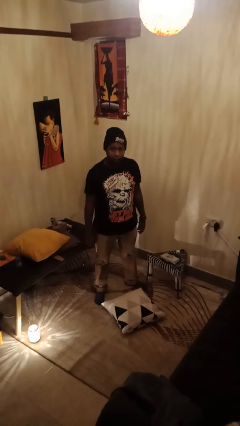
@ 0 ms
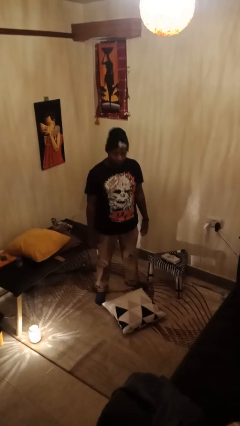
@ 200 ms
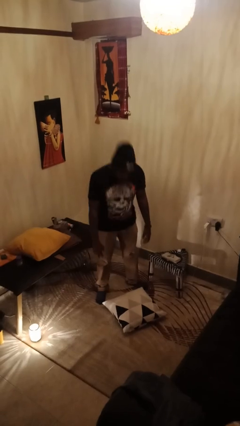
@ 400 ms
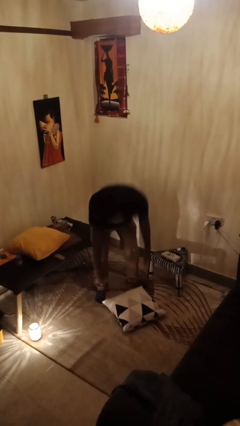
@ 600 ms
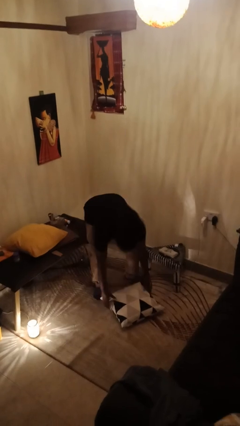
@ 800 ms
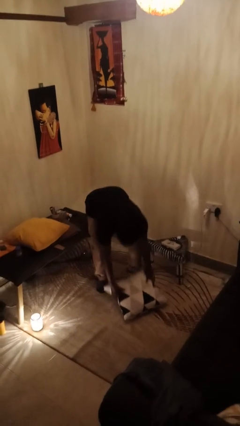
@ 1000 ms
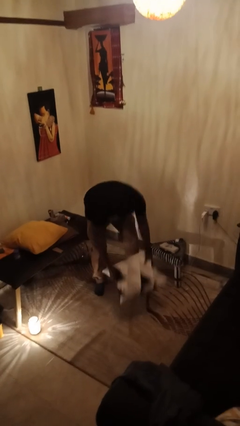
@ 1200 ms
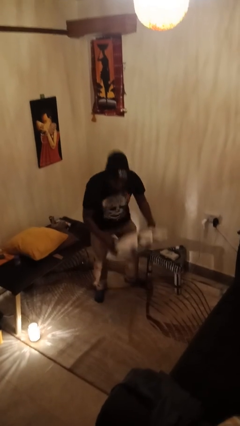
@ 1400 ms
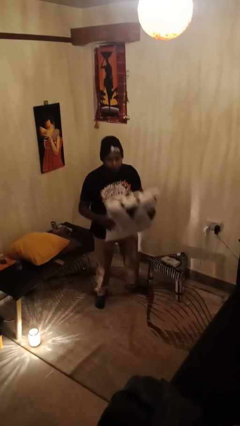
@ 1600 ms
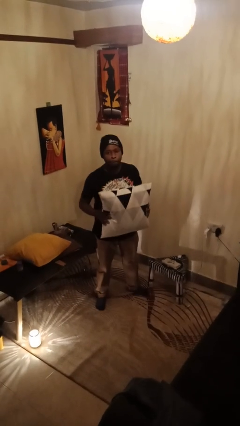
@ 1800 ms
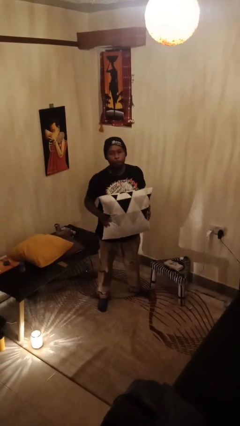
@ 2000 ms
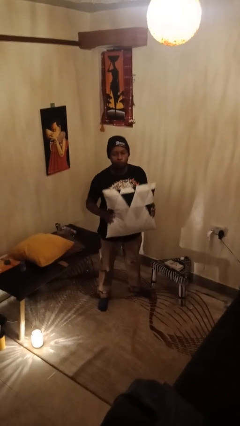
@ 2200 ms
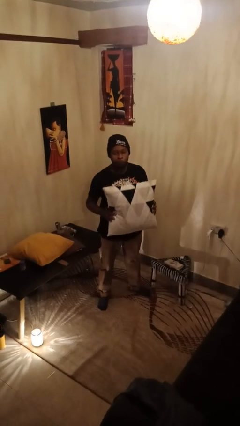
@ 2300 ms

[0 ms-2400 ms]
person picks up object from floor

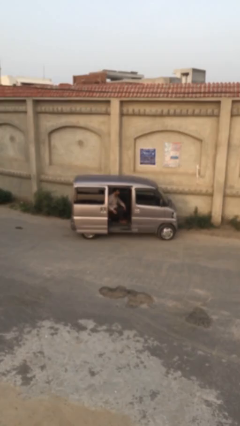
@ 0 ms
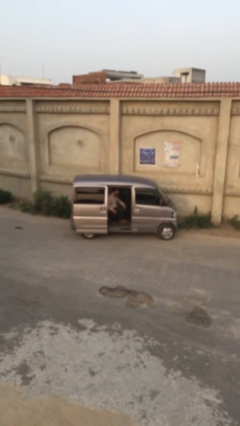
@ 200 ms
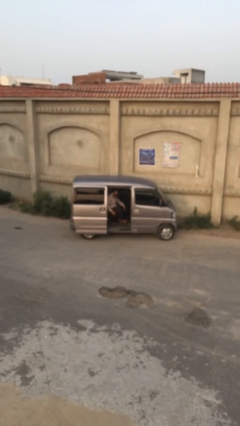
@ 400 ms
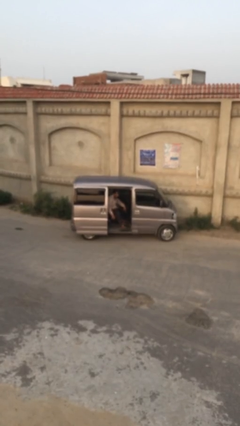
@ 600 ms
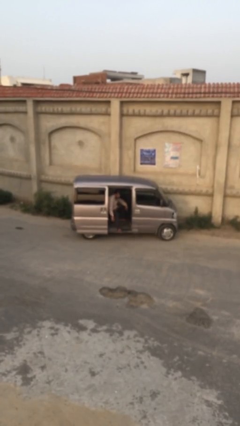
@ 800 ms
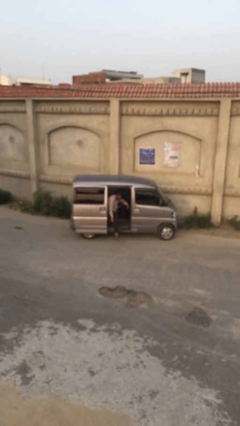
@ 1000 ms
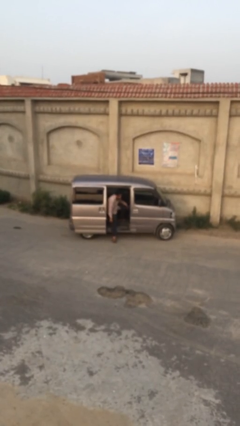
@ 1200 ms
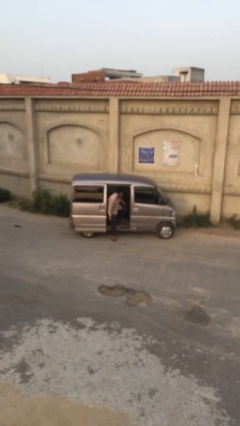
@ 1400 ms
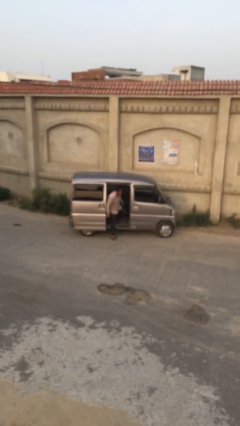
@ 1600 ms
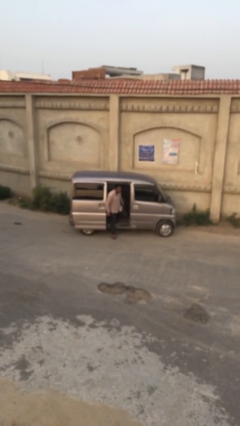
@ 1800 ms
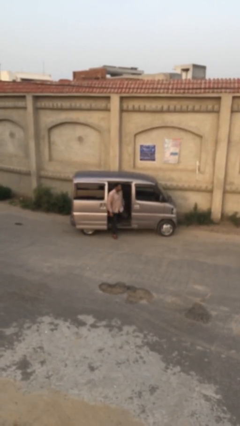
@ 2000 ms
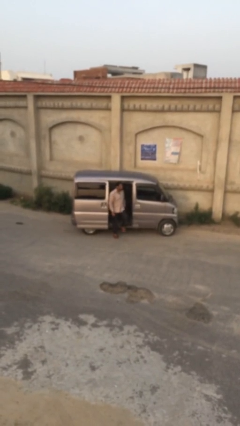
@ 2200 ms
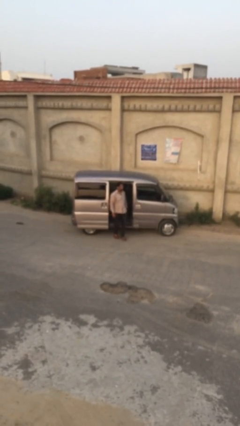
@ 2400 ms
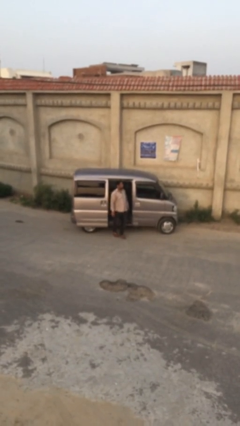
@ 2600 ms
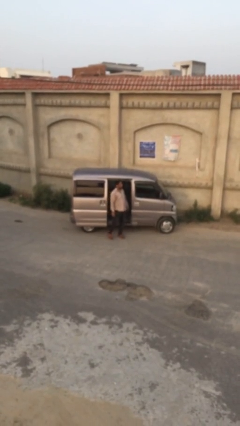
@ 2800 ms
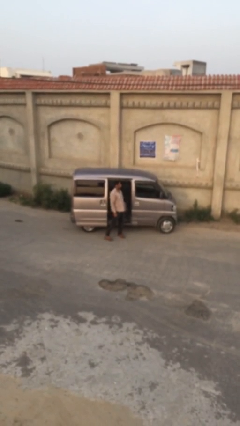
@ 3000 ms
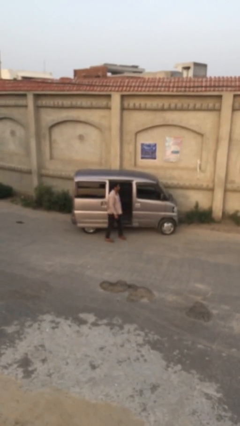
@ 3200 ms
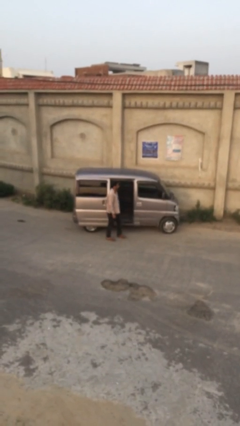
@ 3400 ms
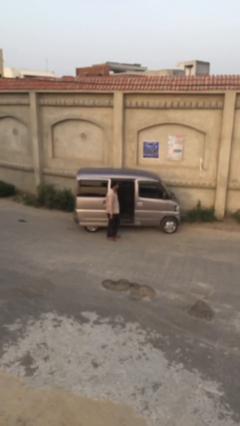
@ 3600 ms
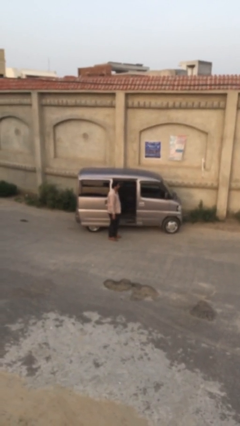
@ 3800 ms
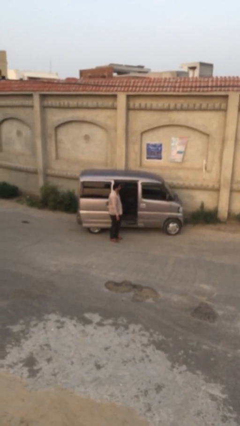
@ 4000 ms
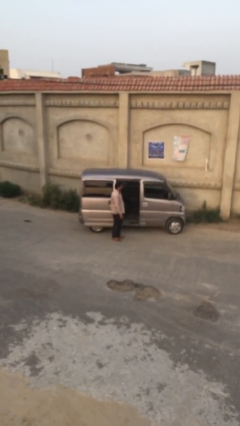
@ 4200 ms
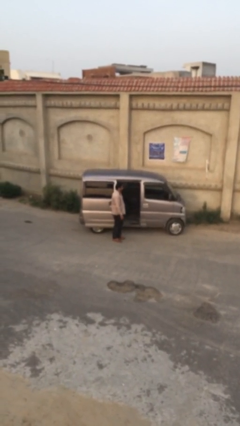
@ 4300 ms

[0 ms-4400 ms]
person exits car

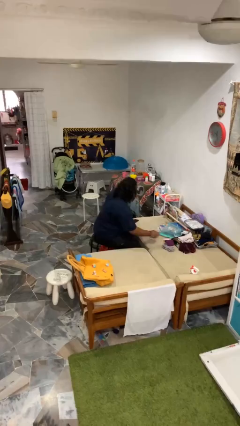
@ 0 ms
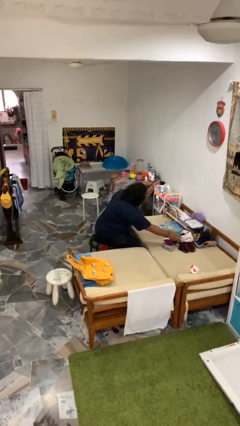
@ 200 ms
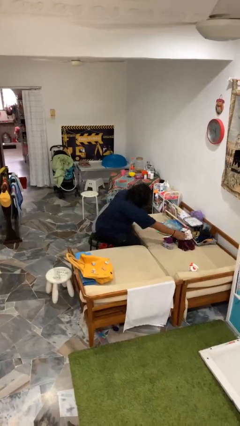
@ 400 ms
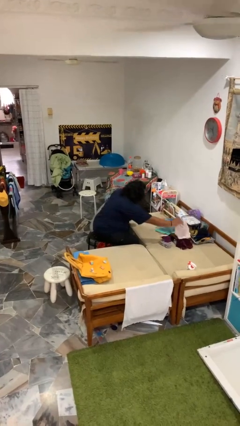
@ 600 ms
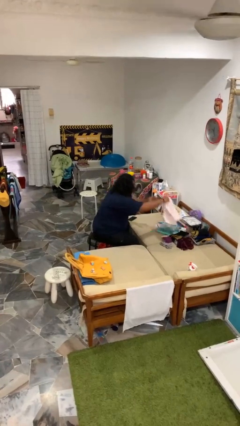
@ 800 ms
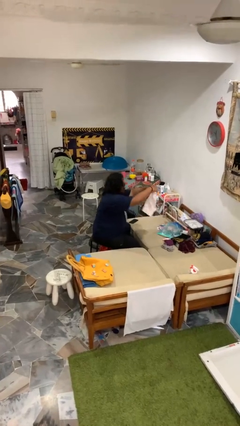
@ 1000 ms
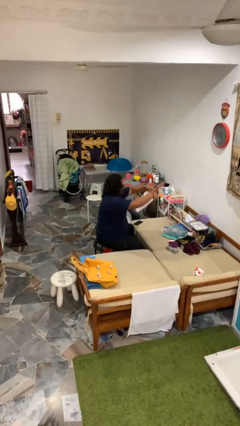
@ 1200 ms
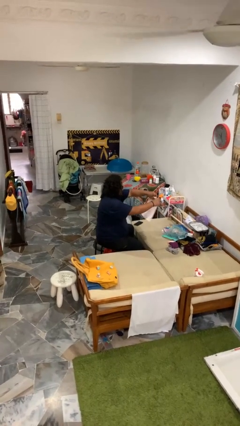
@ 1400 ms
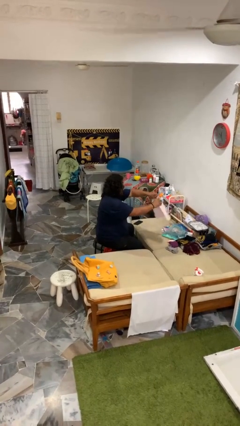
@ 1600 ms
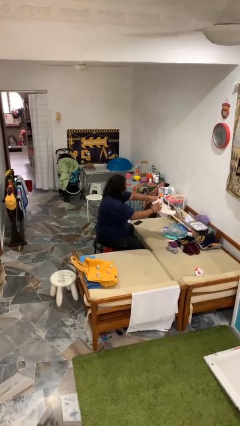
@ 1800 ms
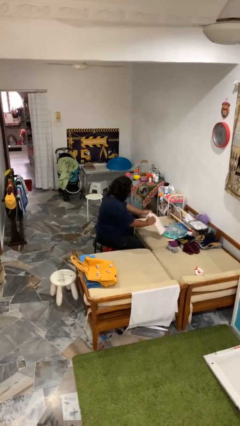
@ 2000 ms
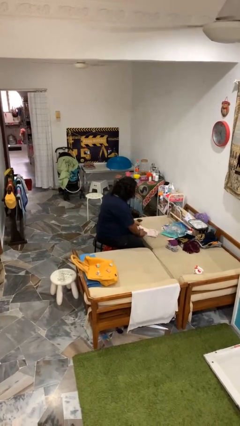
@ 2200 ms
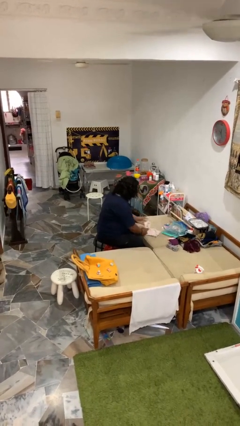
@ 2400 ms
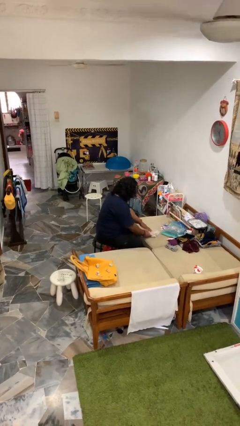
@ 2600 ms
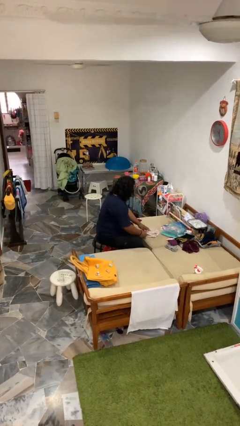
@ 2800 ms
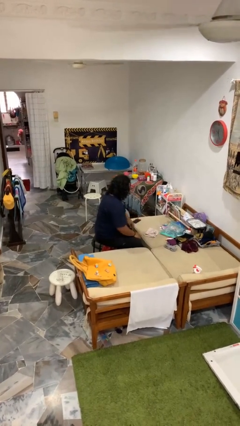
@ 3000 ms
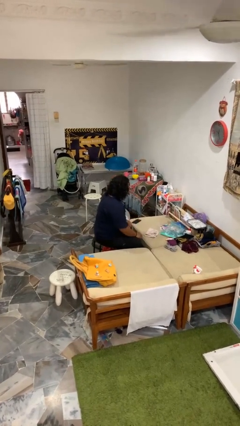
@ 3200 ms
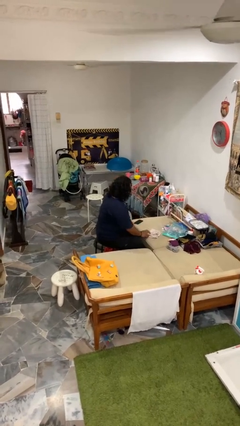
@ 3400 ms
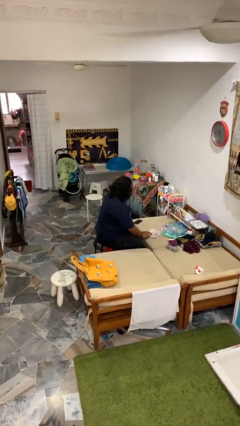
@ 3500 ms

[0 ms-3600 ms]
person folds pants

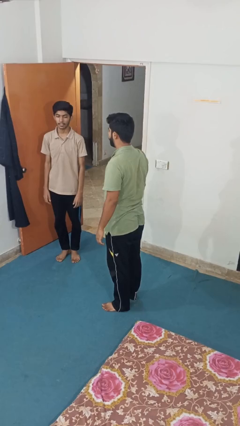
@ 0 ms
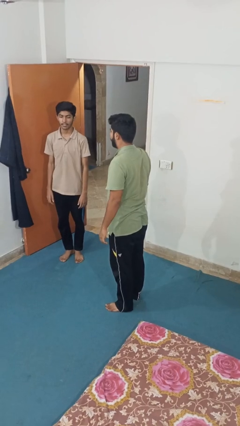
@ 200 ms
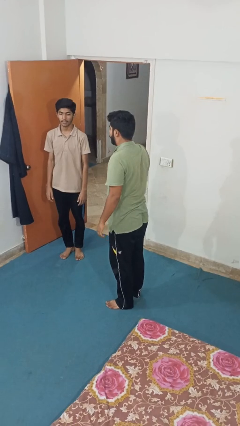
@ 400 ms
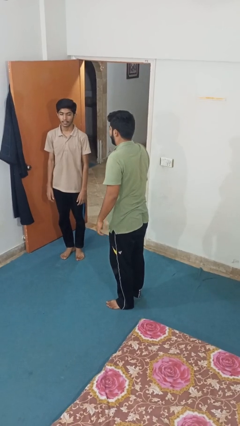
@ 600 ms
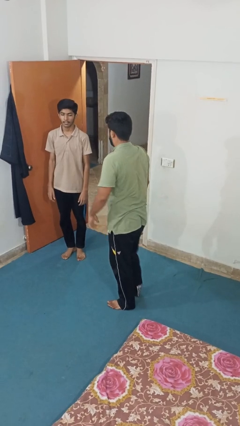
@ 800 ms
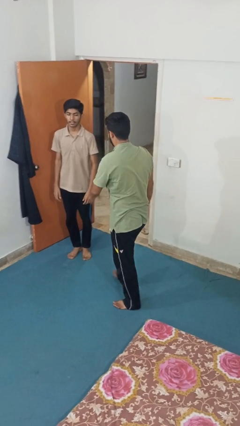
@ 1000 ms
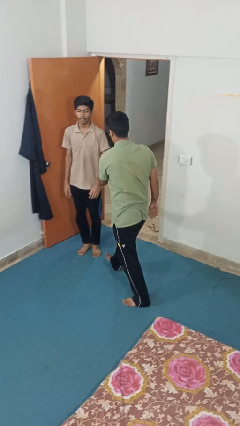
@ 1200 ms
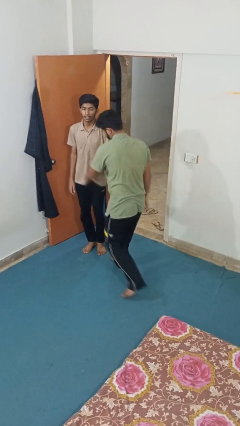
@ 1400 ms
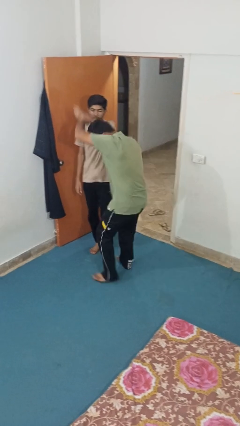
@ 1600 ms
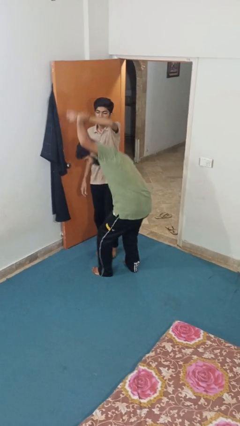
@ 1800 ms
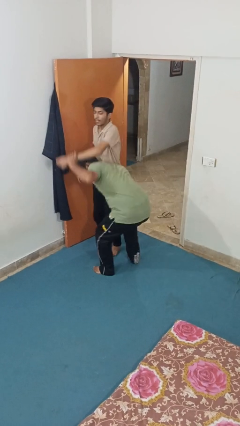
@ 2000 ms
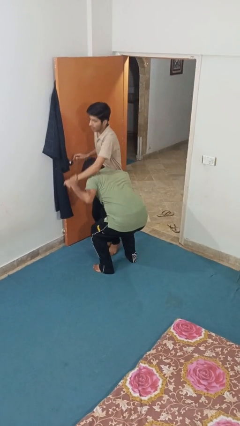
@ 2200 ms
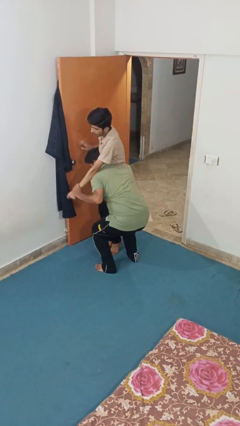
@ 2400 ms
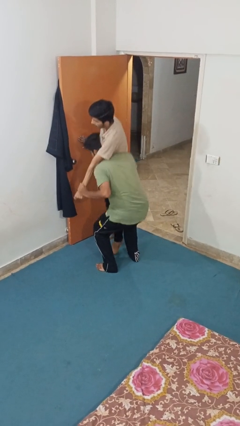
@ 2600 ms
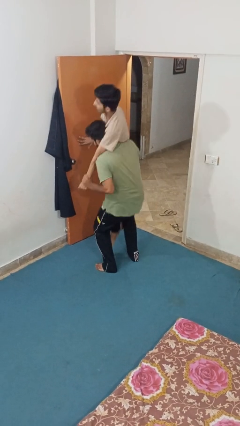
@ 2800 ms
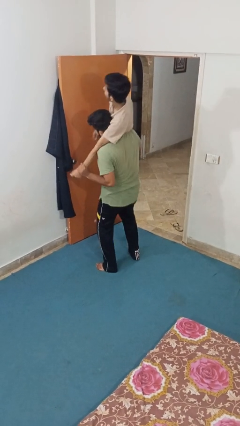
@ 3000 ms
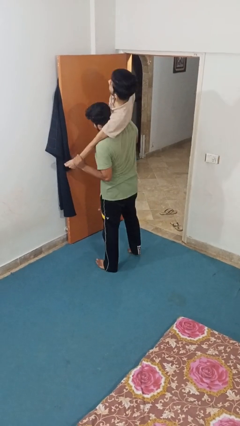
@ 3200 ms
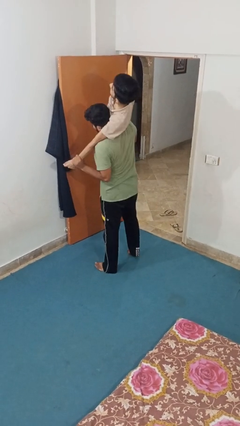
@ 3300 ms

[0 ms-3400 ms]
person carries person over shoulder

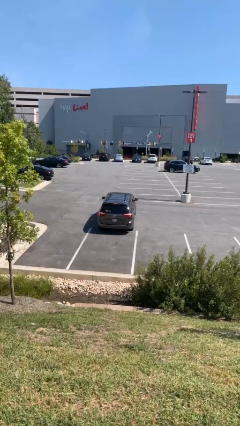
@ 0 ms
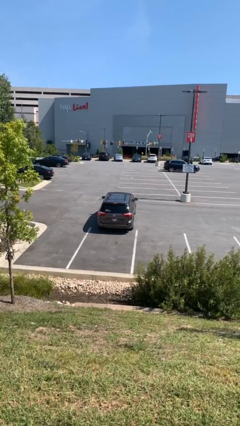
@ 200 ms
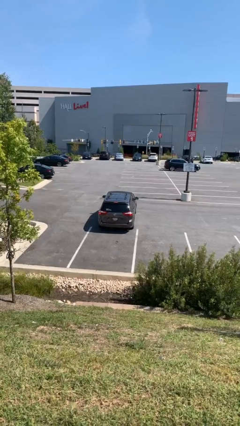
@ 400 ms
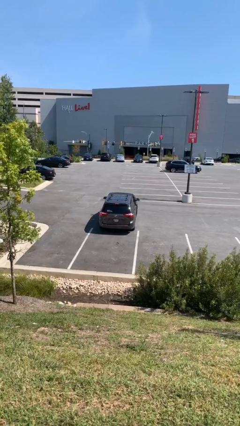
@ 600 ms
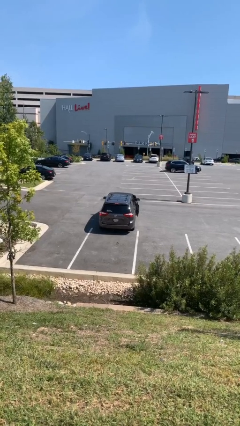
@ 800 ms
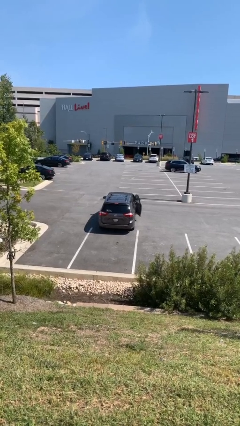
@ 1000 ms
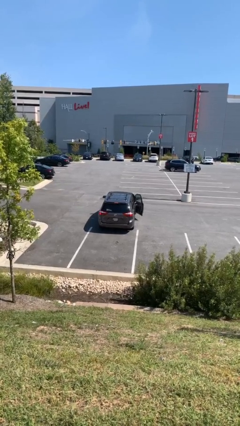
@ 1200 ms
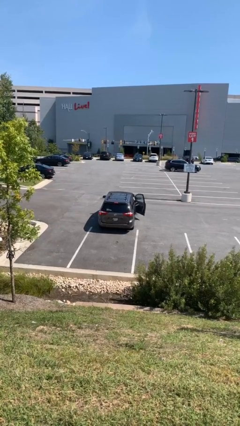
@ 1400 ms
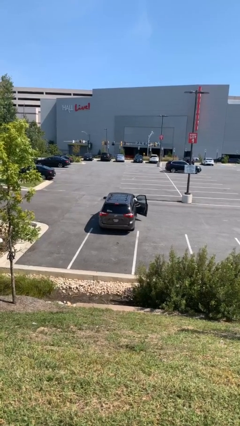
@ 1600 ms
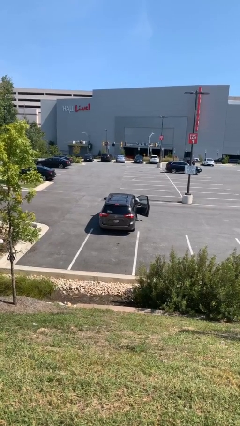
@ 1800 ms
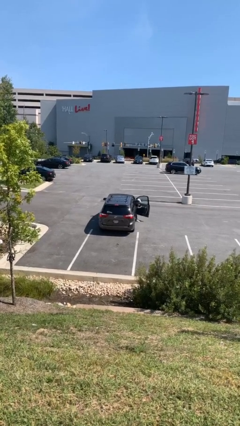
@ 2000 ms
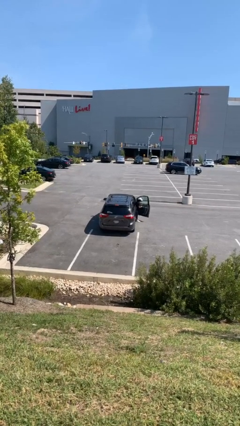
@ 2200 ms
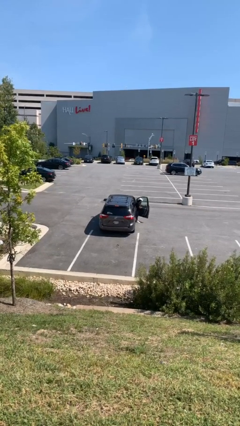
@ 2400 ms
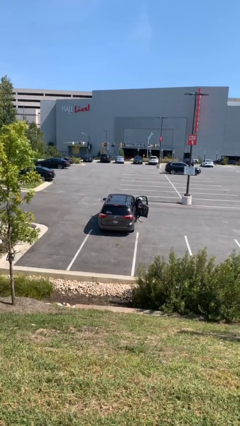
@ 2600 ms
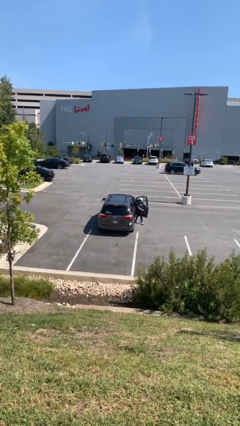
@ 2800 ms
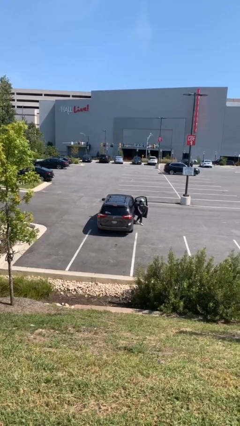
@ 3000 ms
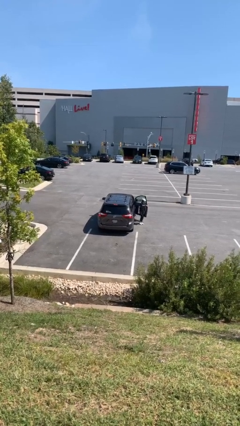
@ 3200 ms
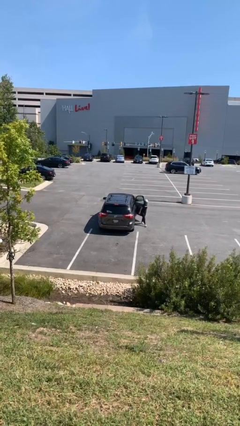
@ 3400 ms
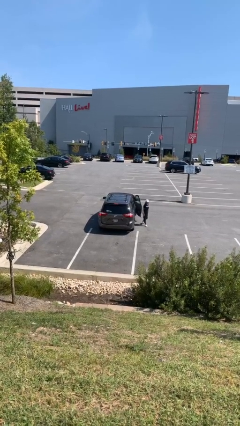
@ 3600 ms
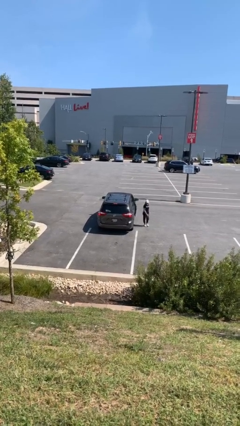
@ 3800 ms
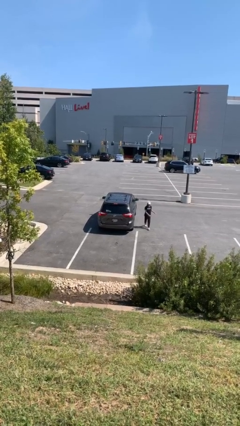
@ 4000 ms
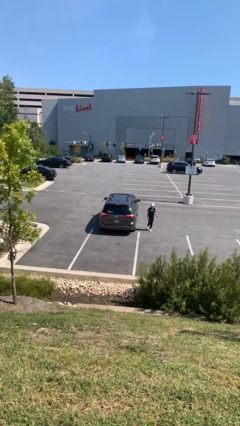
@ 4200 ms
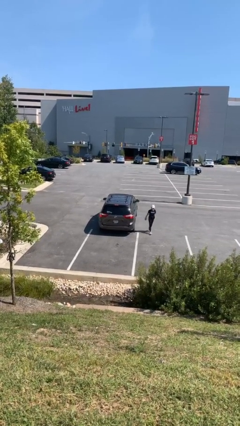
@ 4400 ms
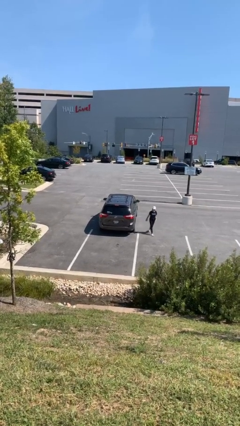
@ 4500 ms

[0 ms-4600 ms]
car drops off person
